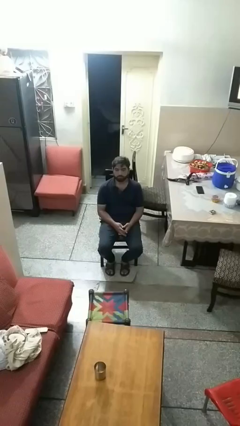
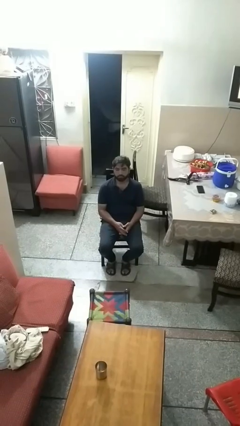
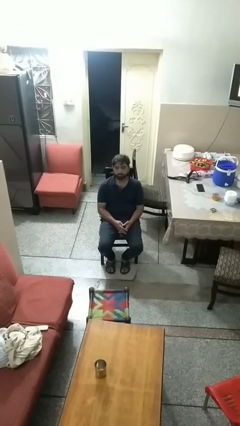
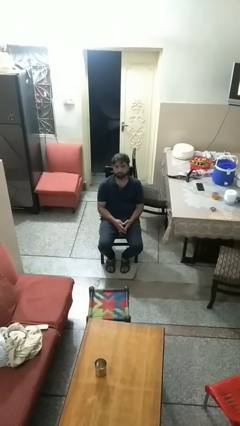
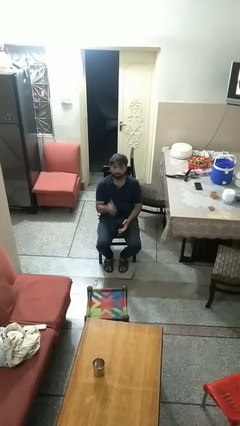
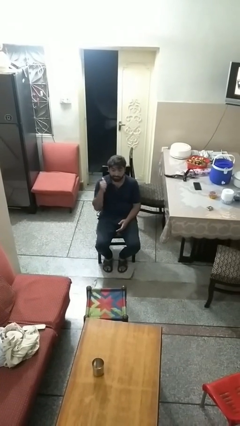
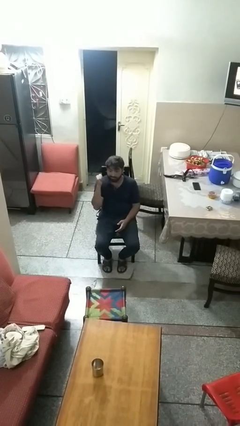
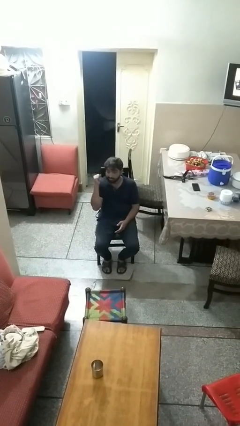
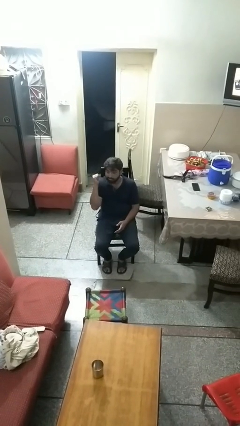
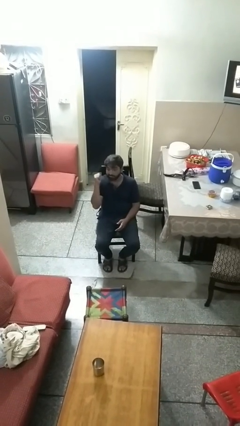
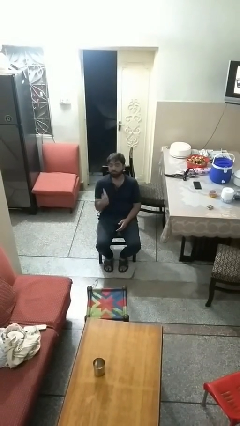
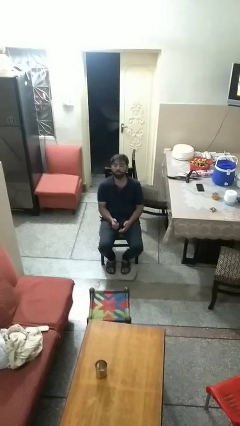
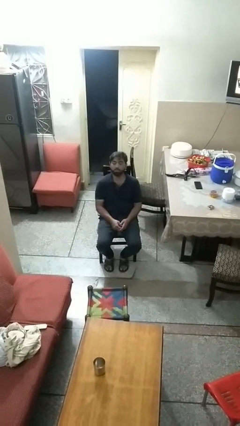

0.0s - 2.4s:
person gestures behind me

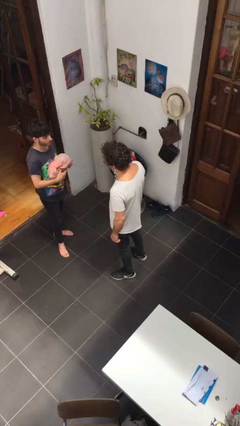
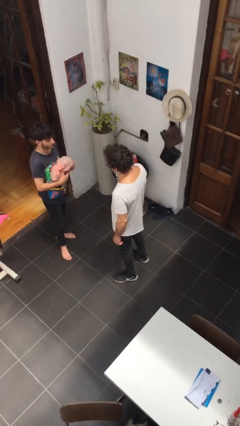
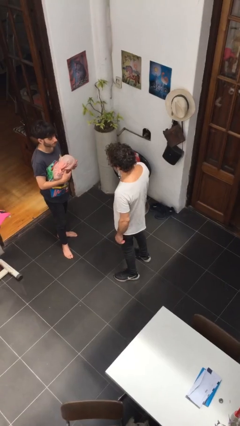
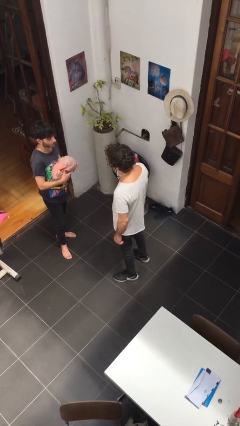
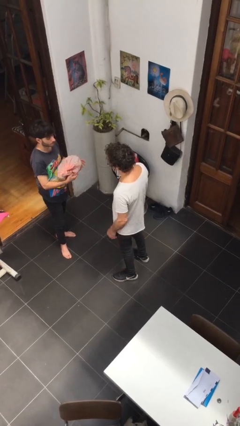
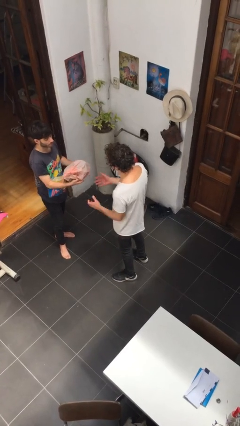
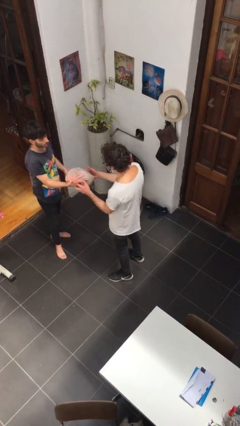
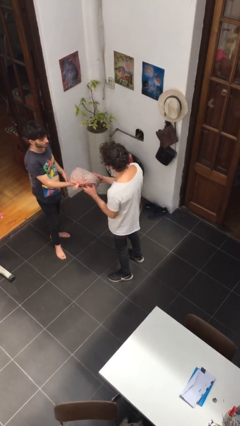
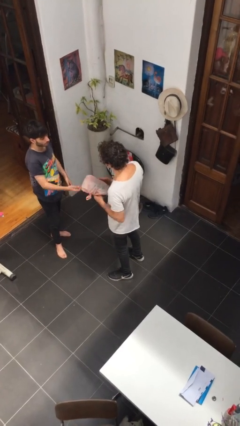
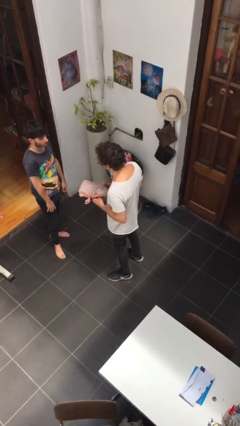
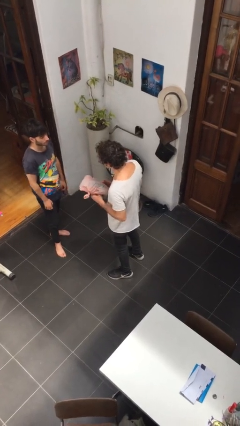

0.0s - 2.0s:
person transfers object to person

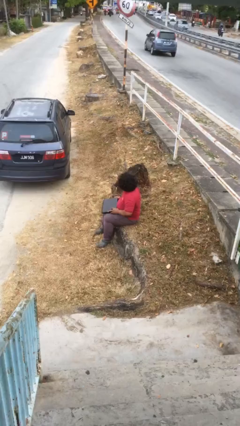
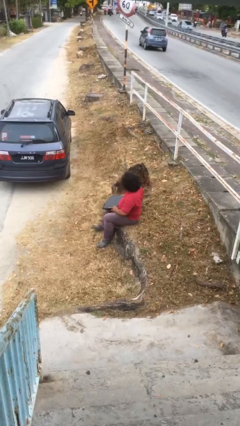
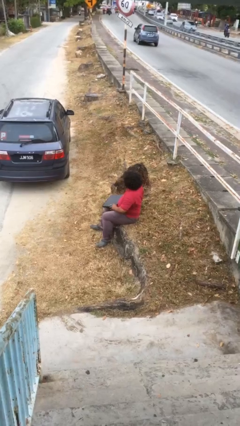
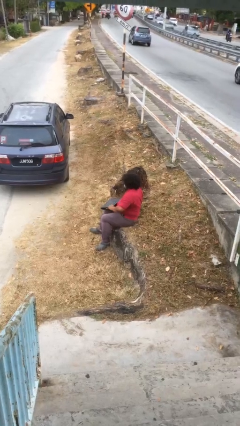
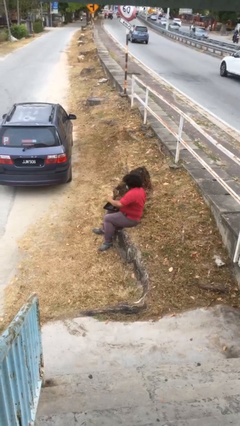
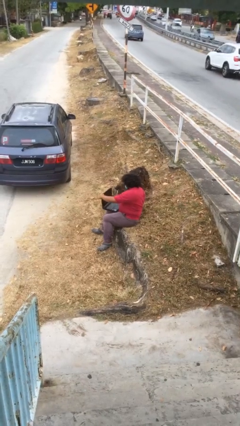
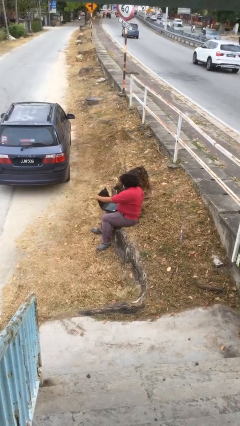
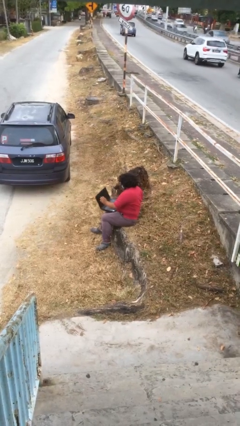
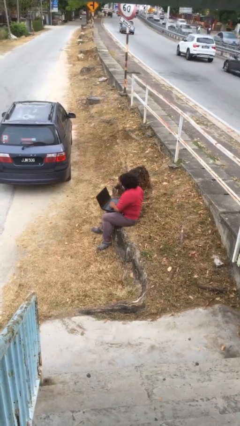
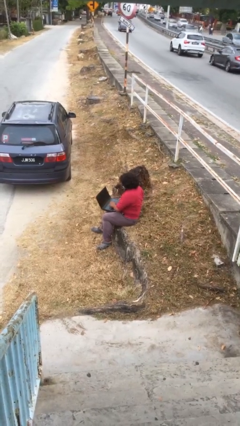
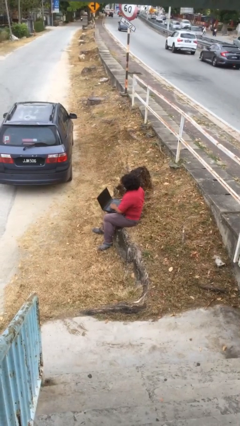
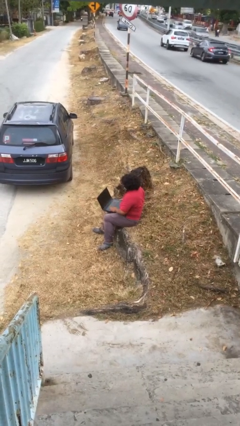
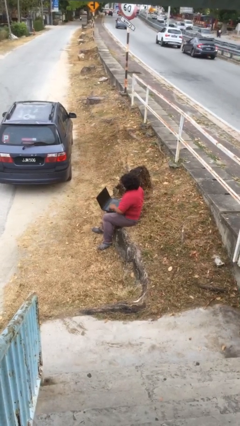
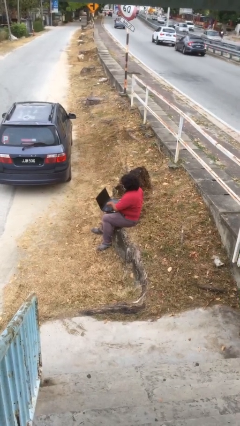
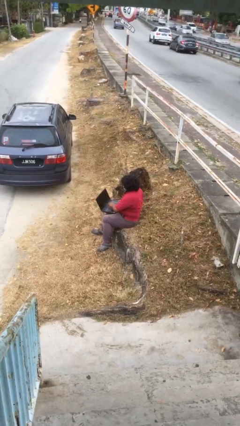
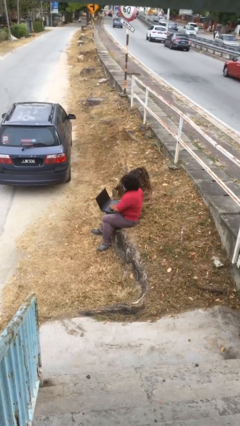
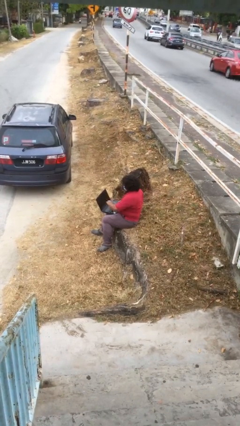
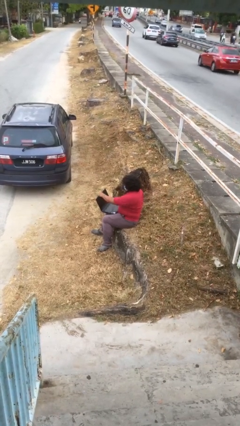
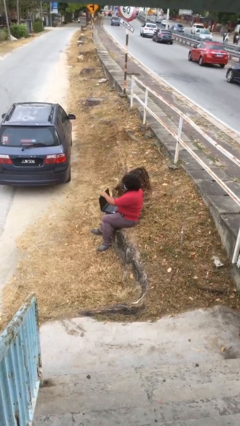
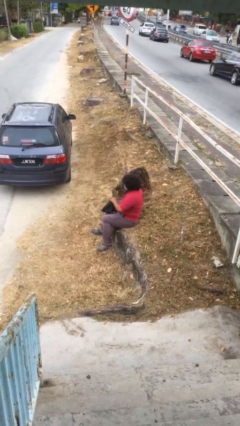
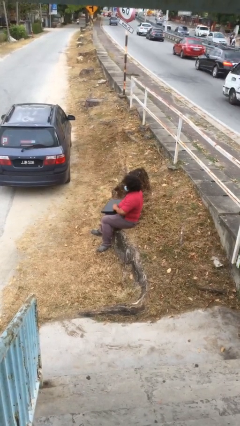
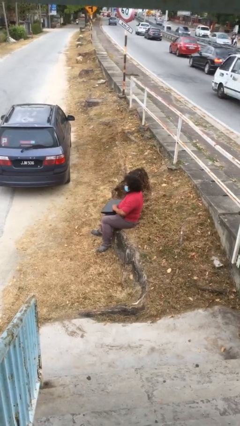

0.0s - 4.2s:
person interacts with laptop

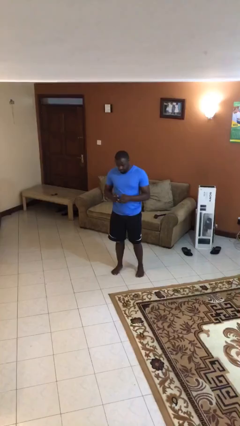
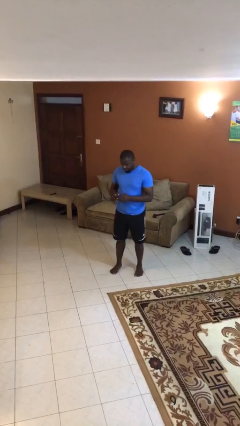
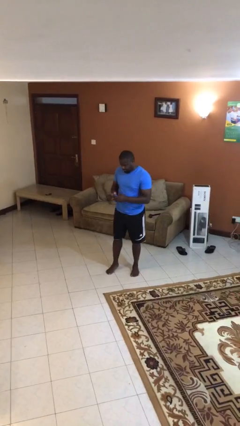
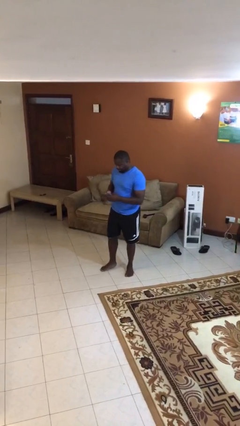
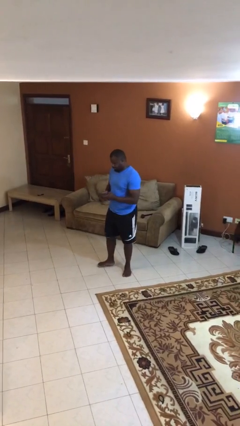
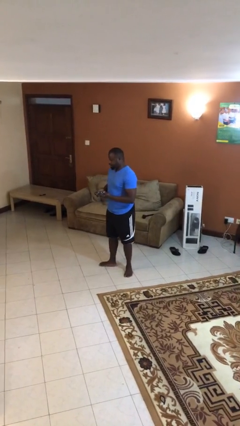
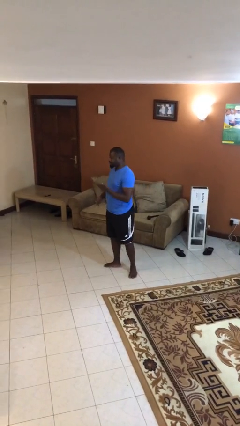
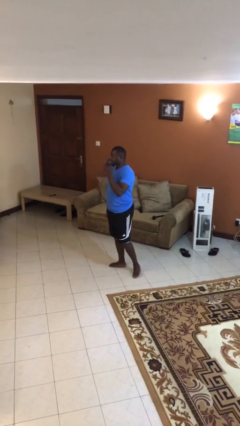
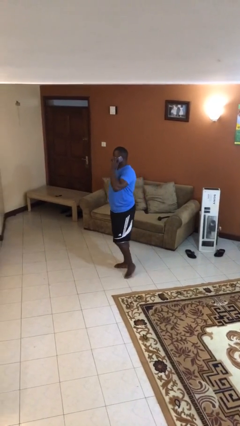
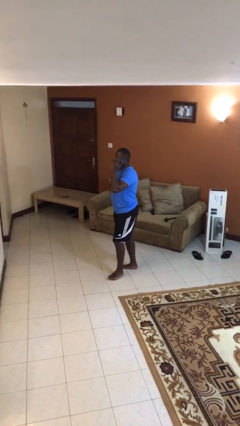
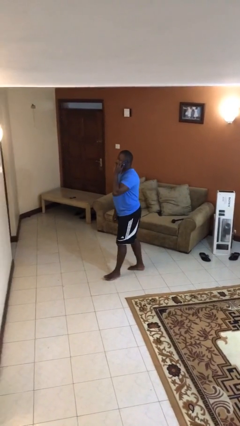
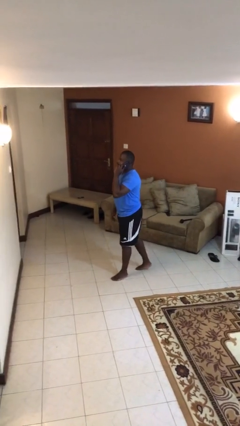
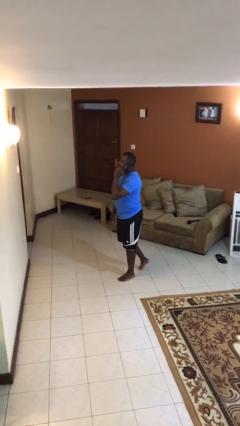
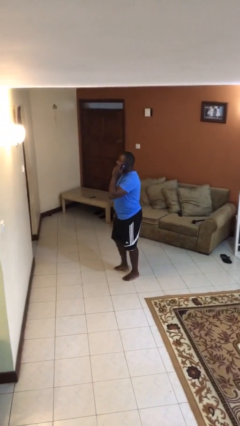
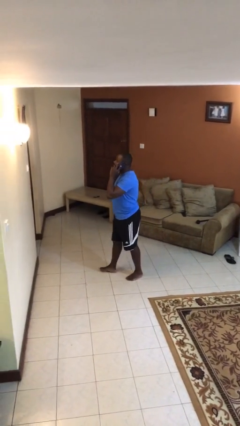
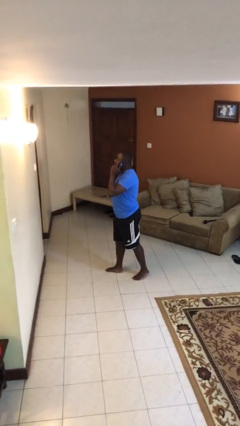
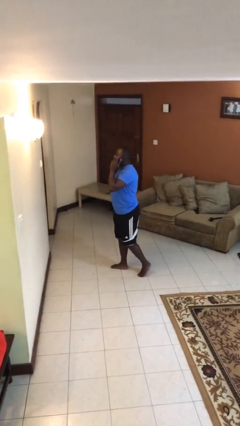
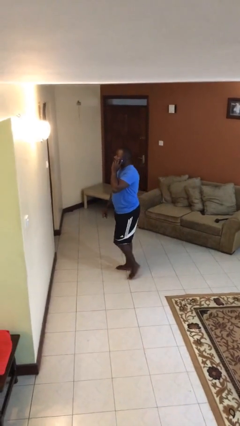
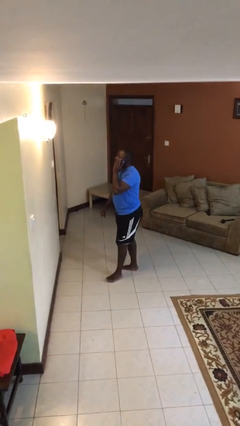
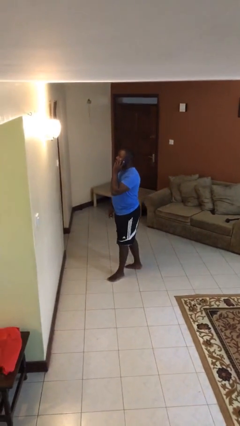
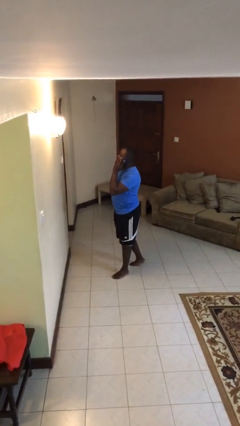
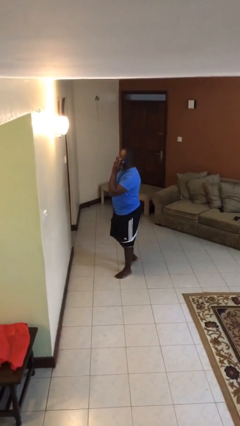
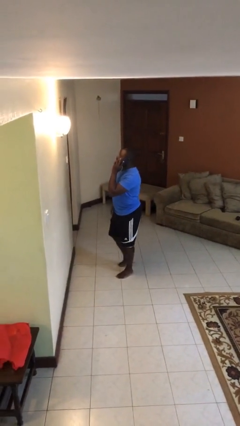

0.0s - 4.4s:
person talks on phone

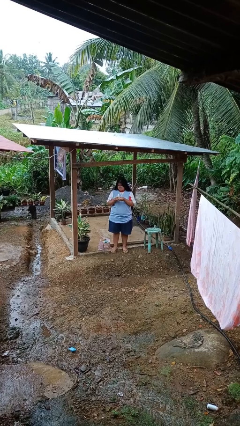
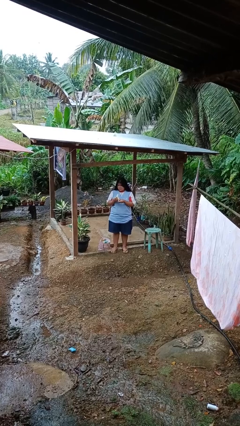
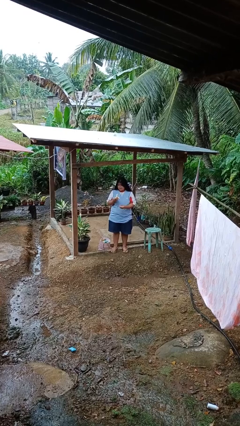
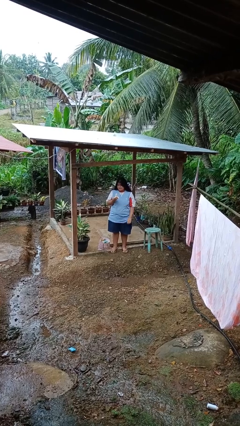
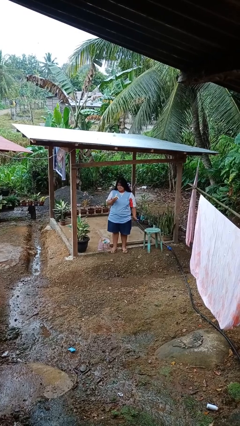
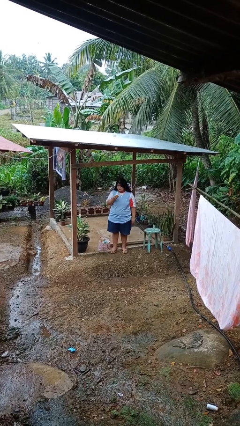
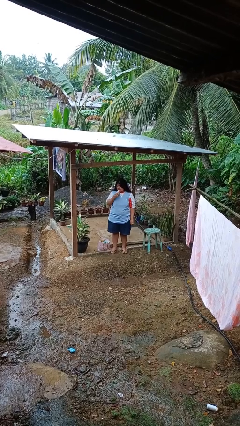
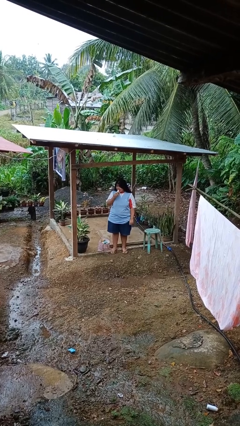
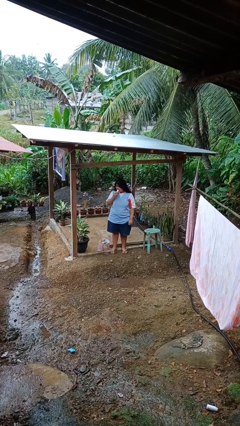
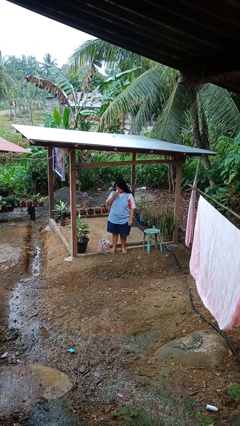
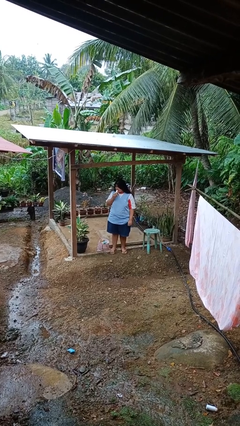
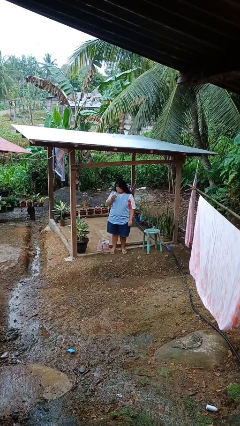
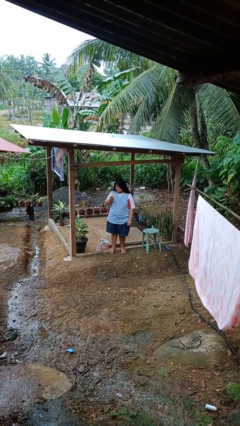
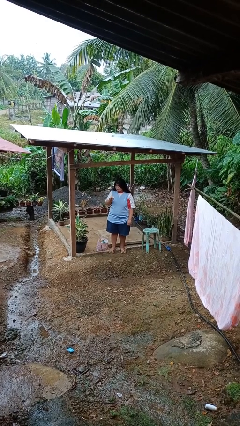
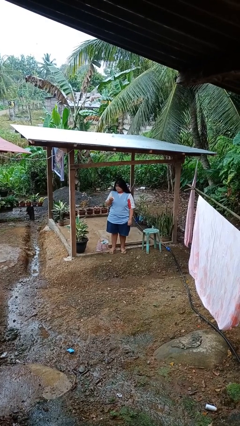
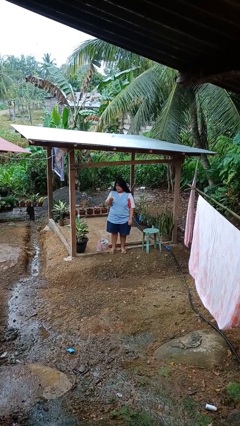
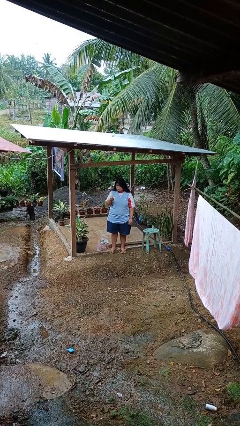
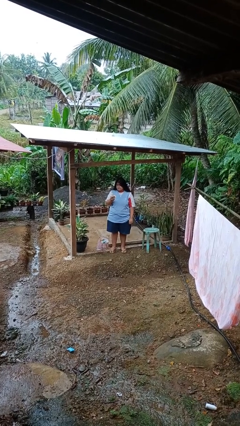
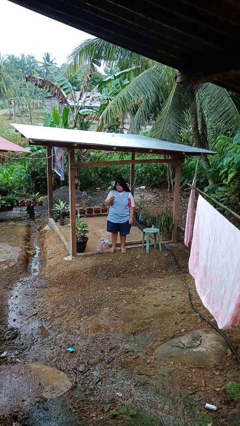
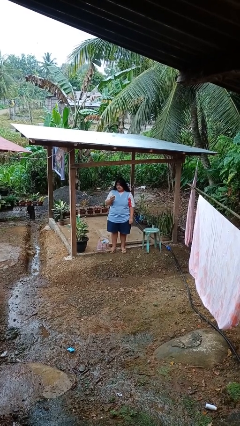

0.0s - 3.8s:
person eats banana

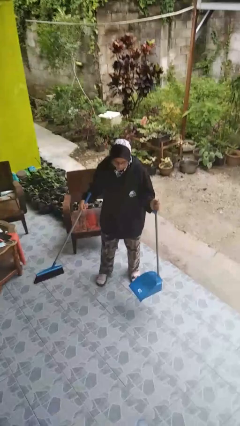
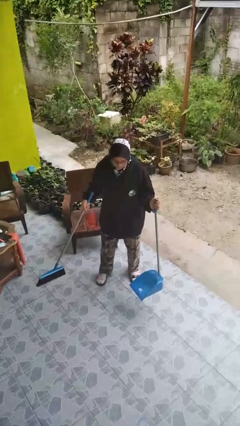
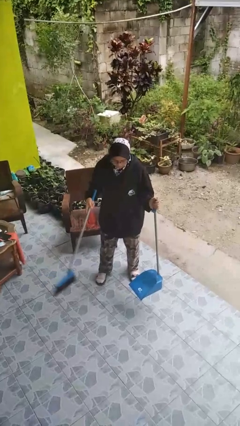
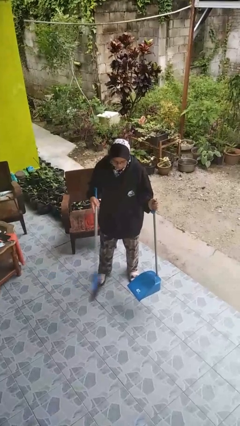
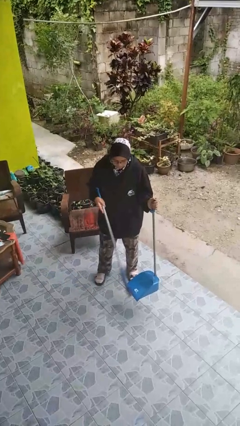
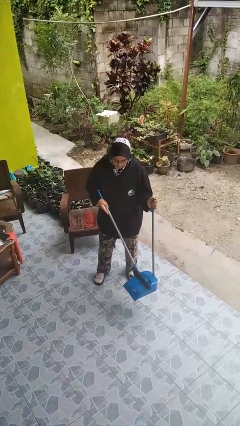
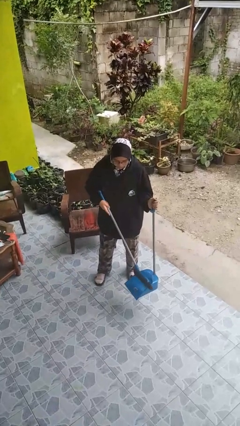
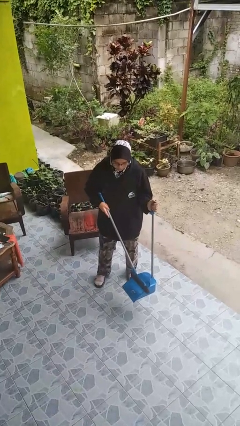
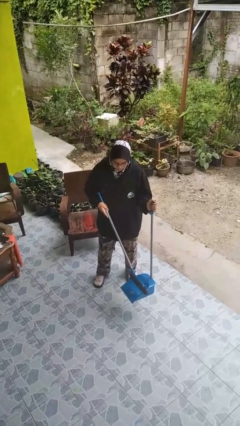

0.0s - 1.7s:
person sweeps floor
